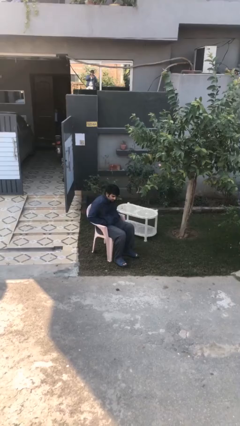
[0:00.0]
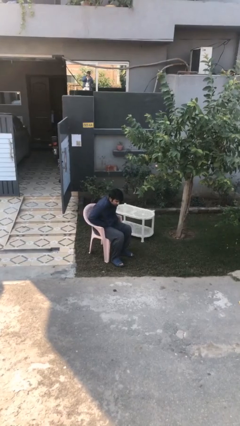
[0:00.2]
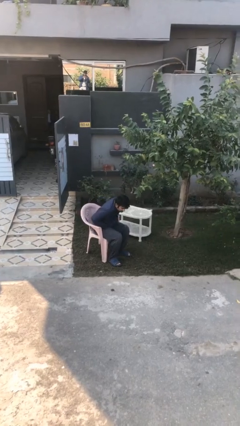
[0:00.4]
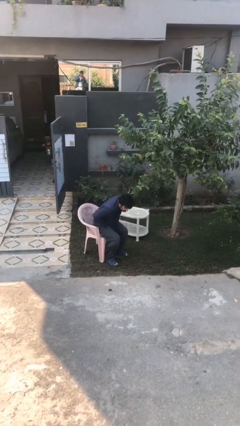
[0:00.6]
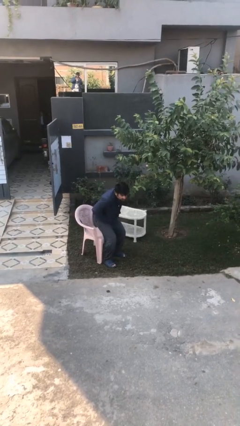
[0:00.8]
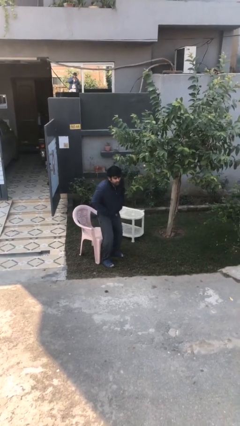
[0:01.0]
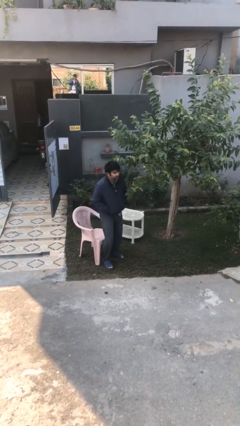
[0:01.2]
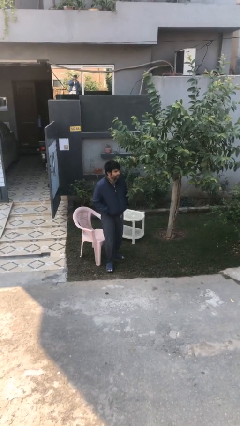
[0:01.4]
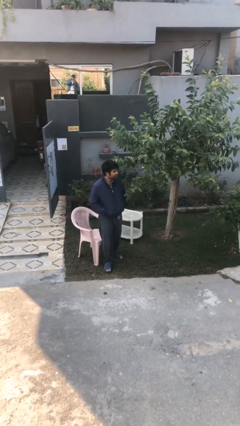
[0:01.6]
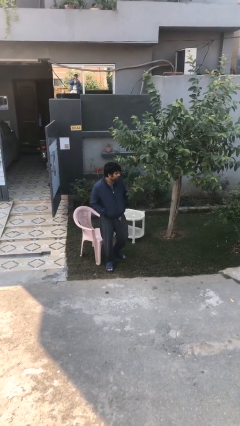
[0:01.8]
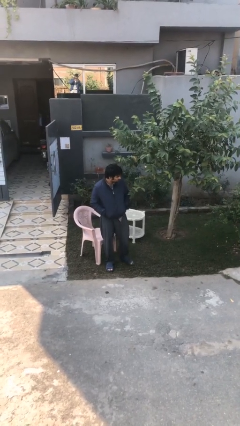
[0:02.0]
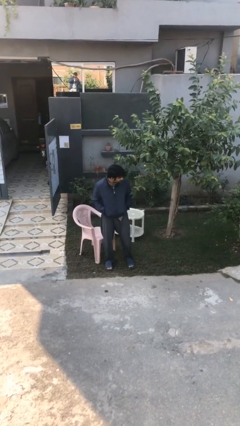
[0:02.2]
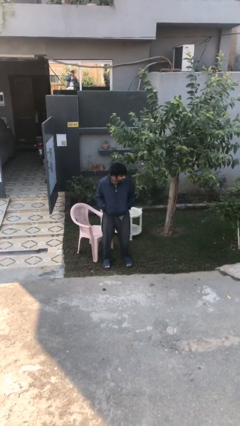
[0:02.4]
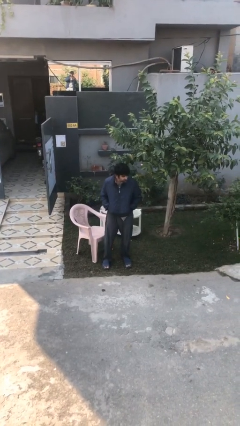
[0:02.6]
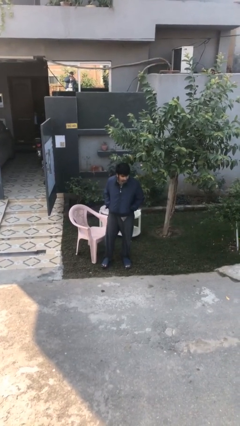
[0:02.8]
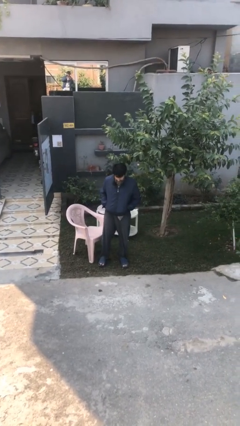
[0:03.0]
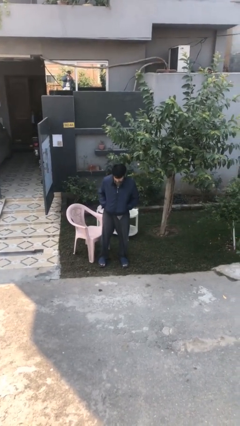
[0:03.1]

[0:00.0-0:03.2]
person stands up

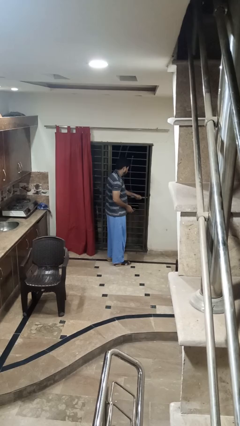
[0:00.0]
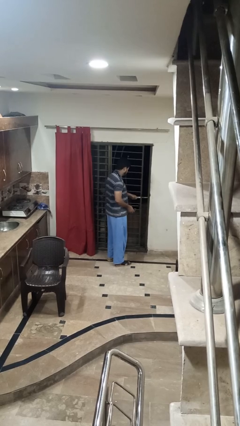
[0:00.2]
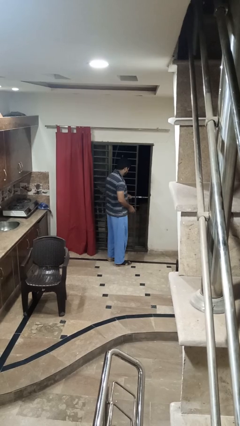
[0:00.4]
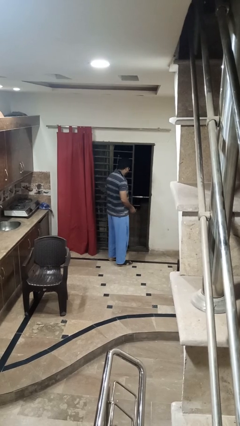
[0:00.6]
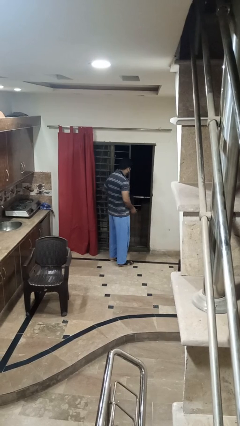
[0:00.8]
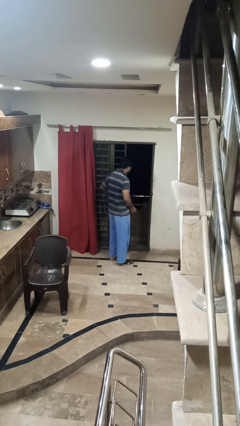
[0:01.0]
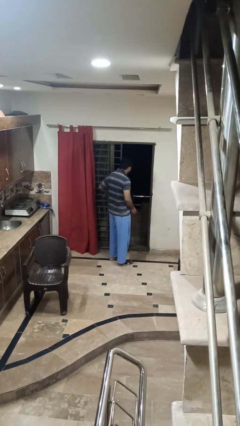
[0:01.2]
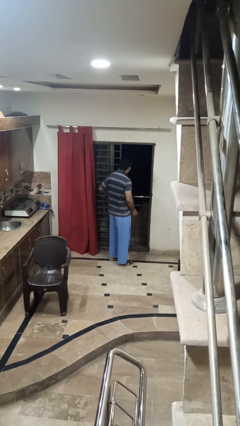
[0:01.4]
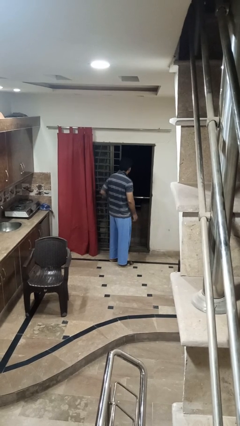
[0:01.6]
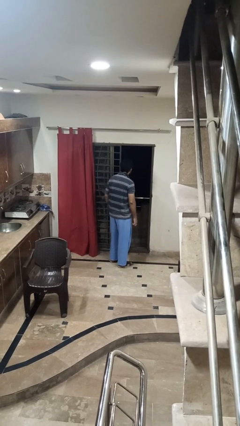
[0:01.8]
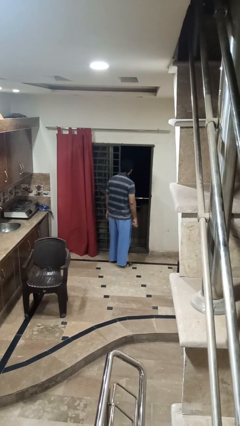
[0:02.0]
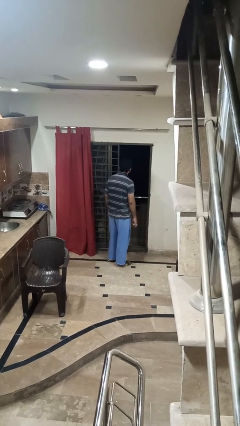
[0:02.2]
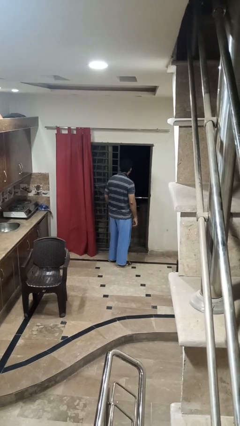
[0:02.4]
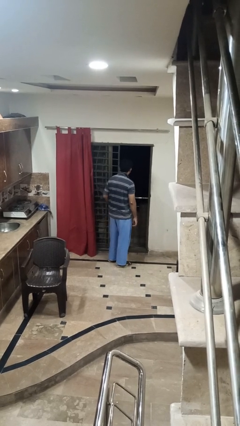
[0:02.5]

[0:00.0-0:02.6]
person opens facility door

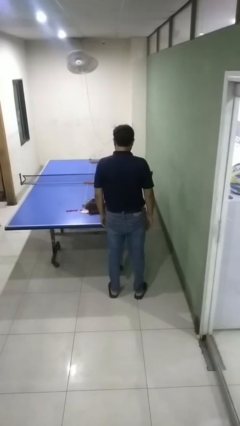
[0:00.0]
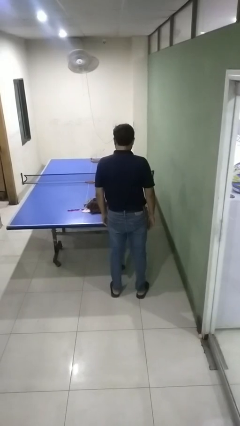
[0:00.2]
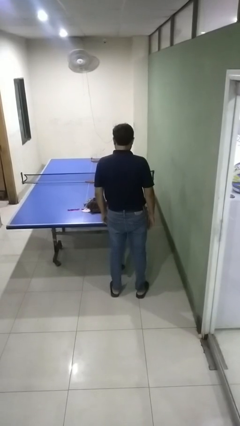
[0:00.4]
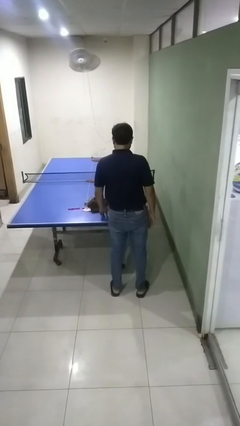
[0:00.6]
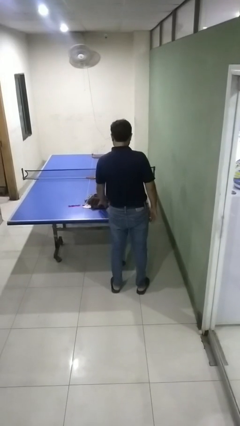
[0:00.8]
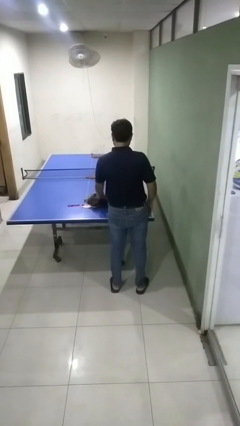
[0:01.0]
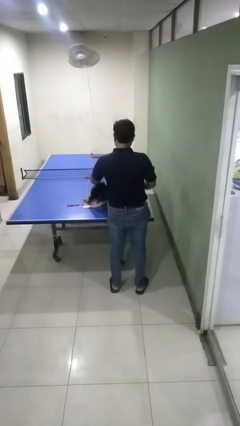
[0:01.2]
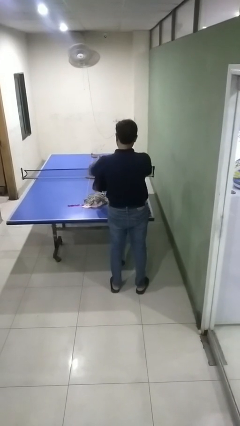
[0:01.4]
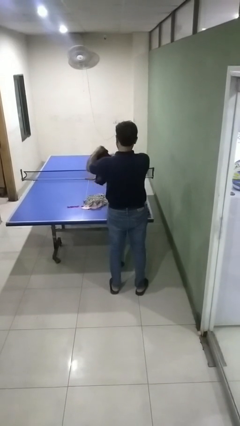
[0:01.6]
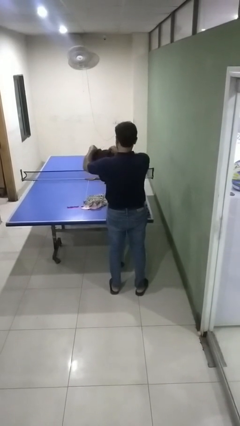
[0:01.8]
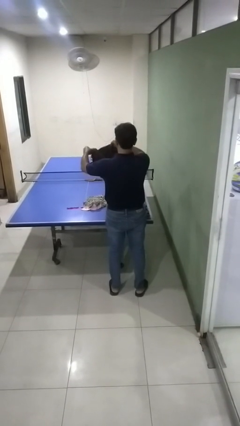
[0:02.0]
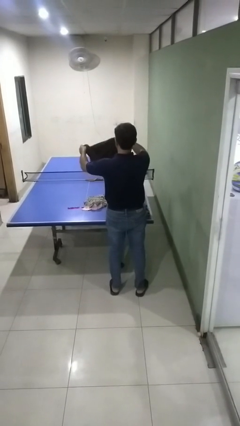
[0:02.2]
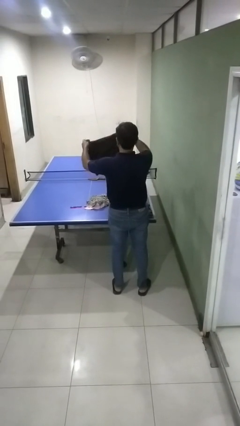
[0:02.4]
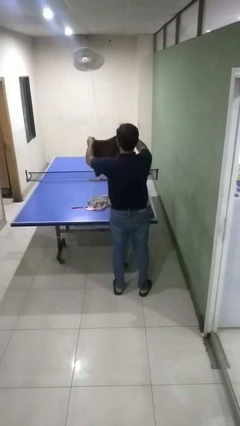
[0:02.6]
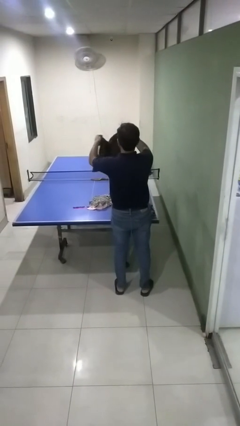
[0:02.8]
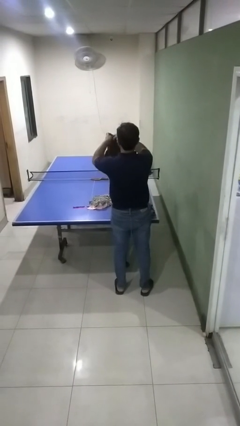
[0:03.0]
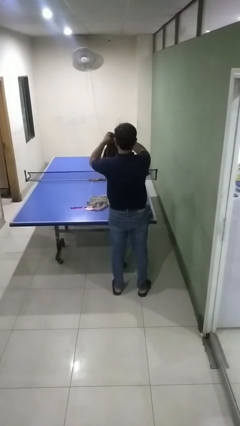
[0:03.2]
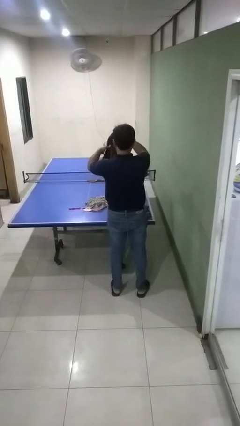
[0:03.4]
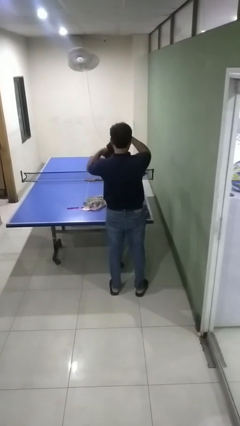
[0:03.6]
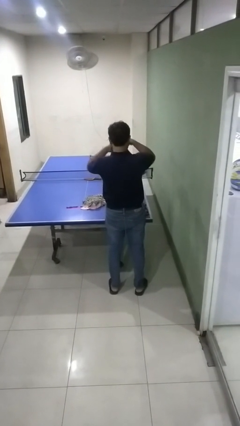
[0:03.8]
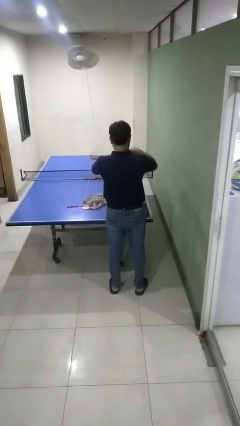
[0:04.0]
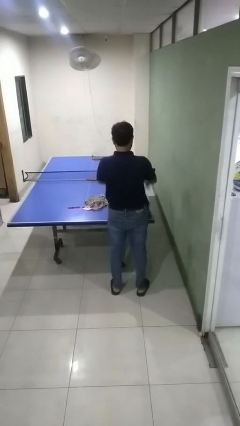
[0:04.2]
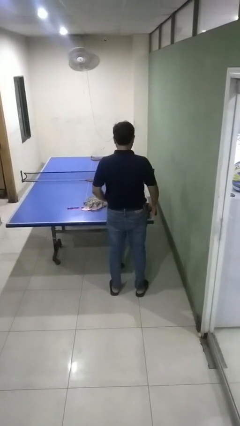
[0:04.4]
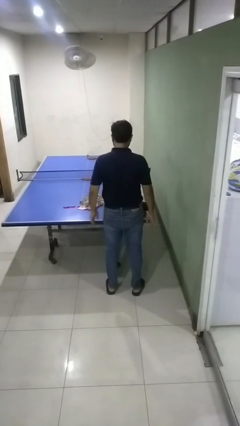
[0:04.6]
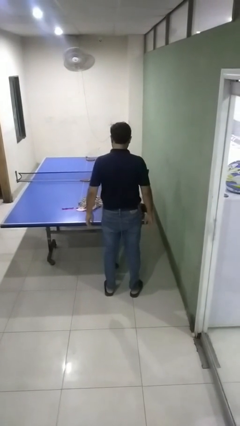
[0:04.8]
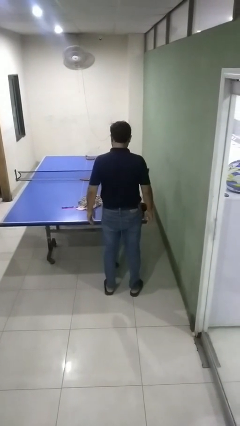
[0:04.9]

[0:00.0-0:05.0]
person folds shirt

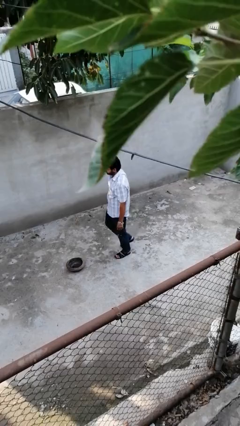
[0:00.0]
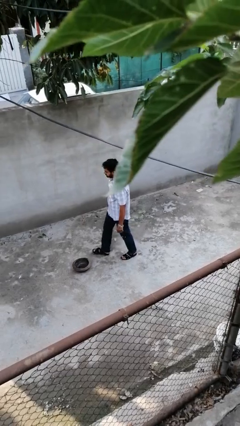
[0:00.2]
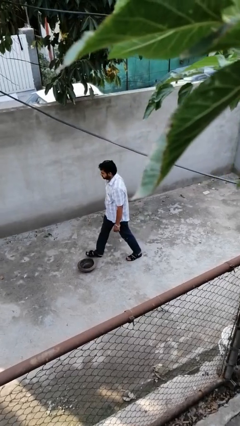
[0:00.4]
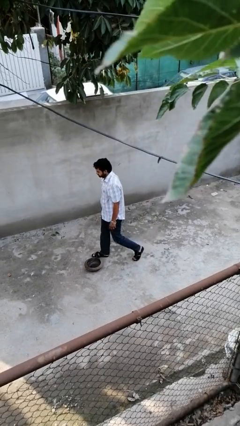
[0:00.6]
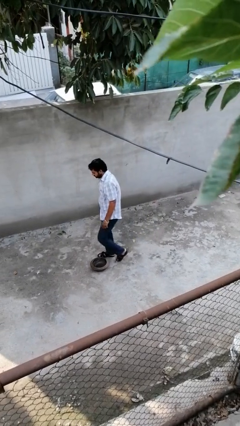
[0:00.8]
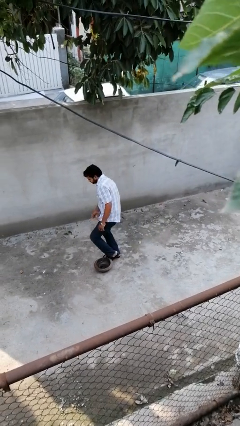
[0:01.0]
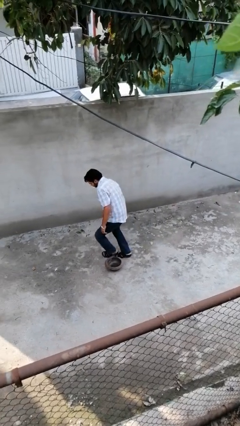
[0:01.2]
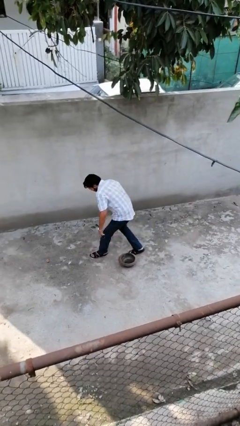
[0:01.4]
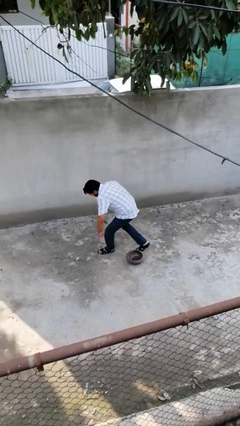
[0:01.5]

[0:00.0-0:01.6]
person trips on object on floor

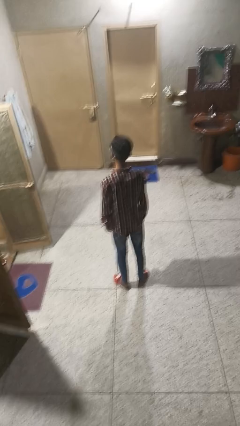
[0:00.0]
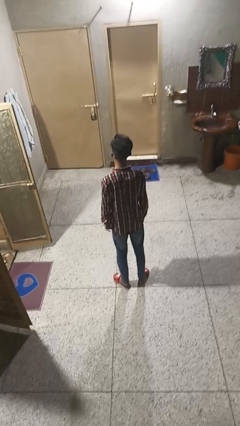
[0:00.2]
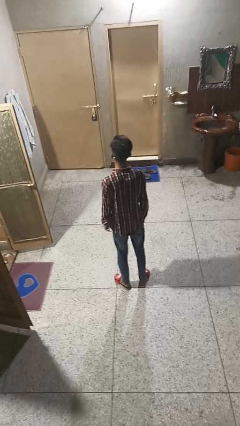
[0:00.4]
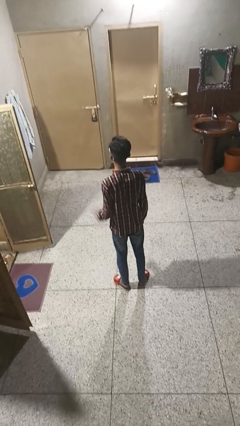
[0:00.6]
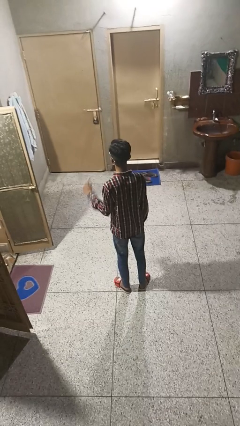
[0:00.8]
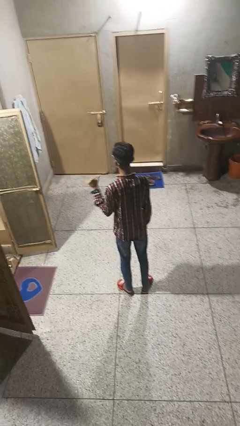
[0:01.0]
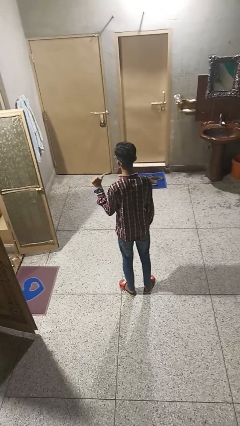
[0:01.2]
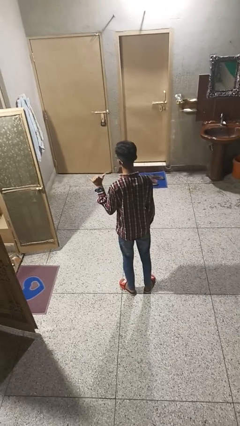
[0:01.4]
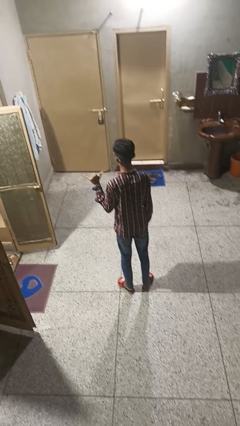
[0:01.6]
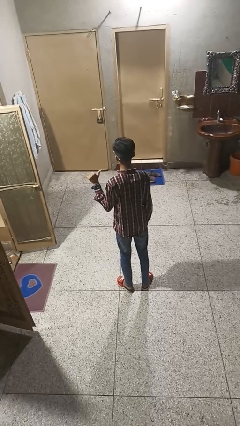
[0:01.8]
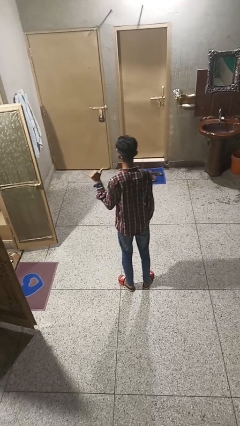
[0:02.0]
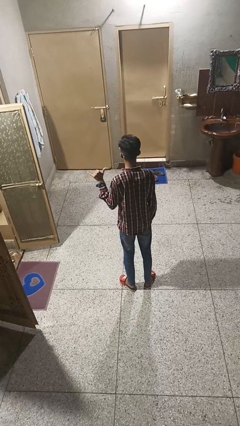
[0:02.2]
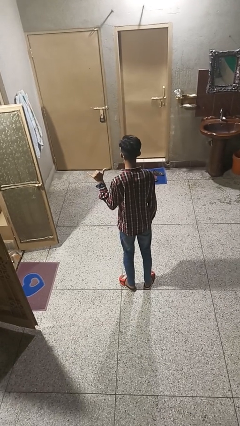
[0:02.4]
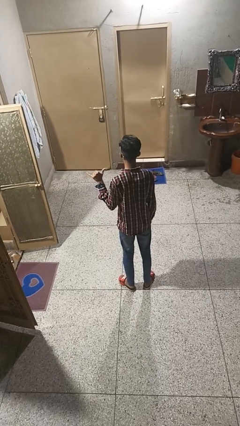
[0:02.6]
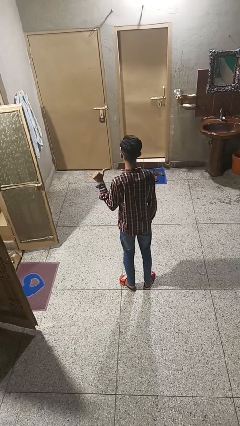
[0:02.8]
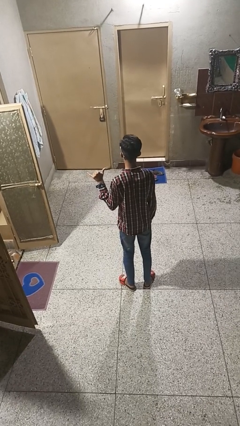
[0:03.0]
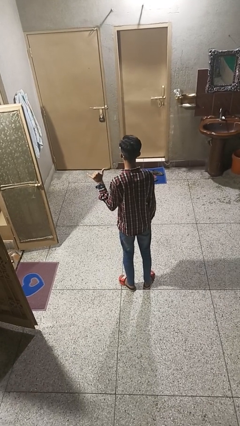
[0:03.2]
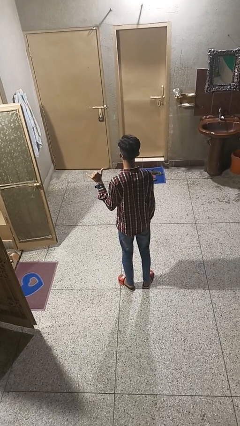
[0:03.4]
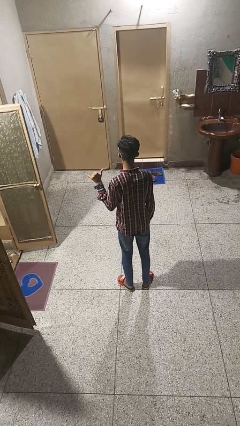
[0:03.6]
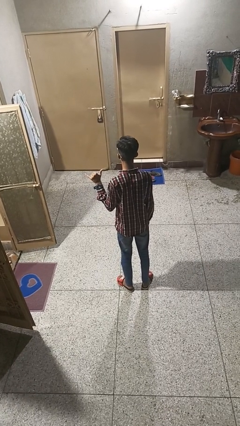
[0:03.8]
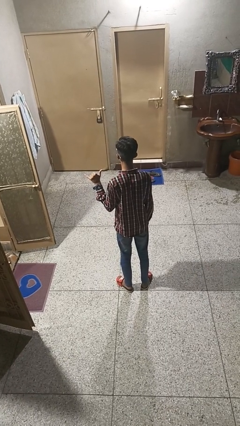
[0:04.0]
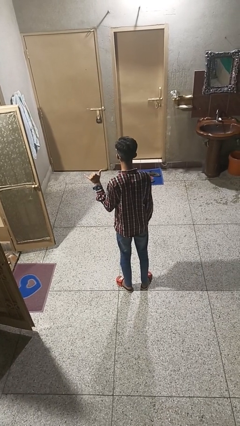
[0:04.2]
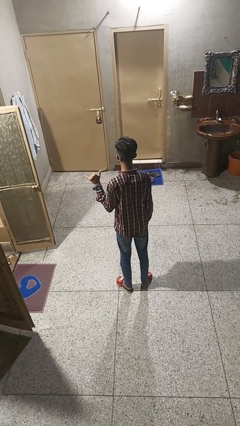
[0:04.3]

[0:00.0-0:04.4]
person gestures hang loose

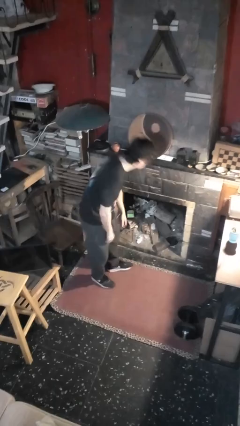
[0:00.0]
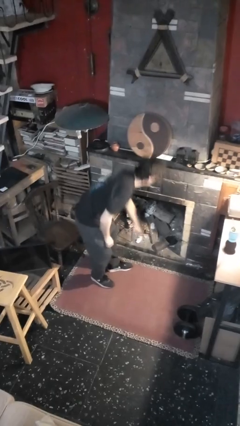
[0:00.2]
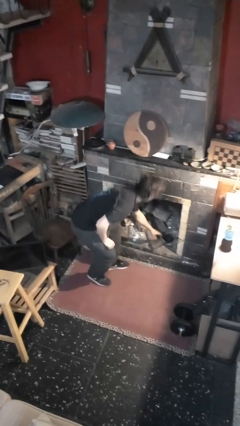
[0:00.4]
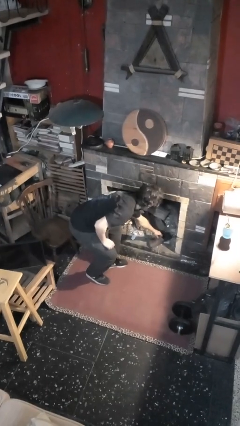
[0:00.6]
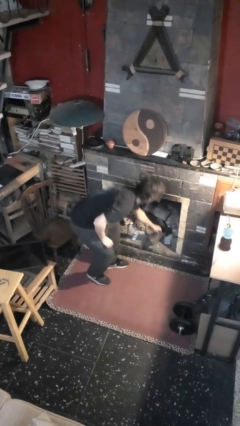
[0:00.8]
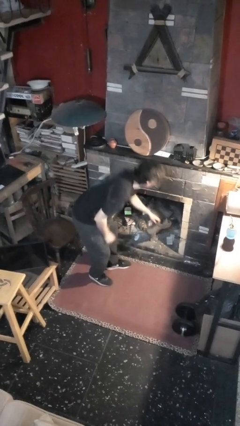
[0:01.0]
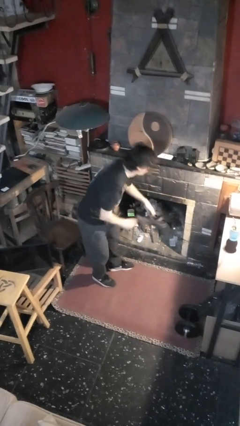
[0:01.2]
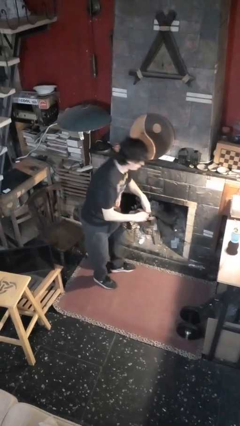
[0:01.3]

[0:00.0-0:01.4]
person picks up object from floor
